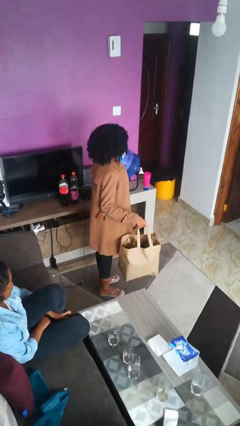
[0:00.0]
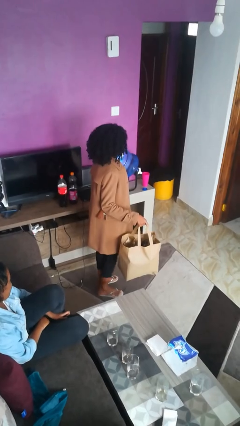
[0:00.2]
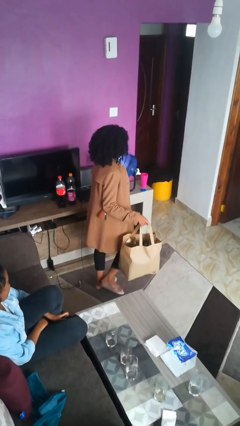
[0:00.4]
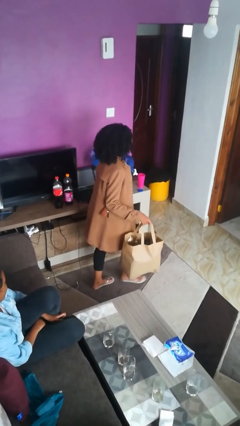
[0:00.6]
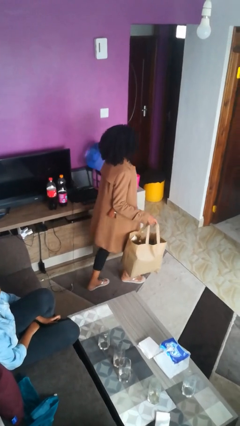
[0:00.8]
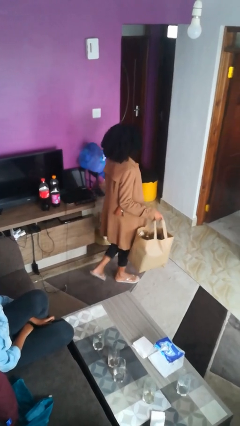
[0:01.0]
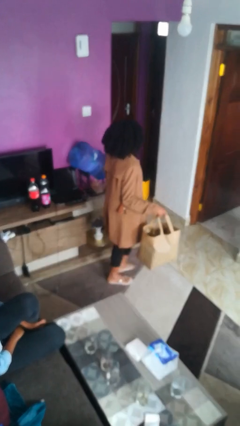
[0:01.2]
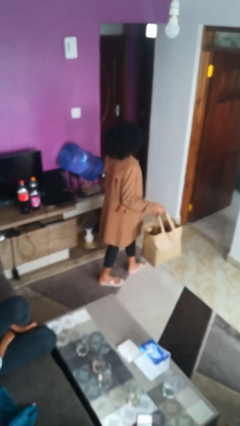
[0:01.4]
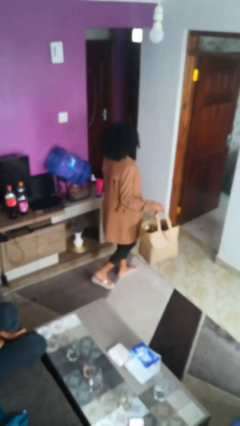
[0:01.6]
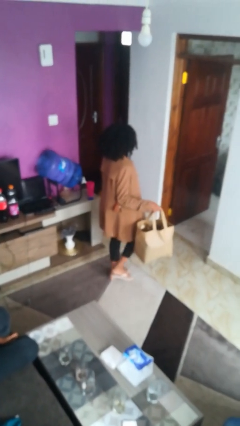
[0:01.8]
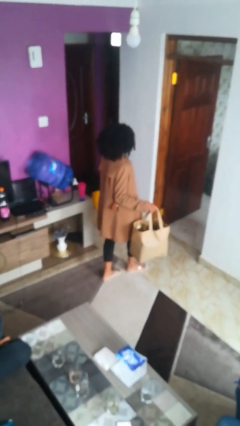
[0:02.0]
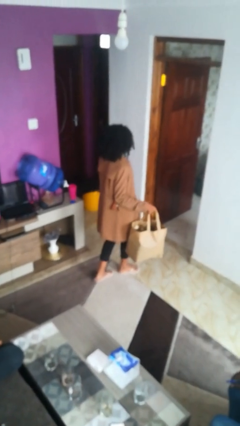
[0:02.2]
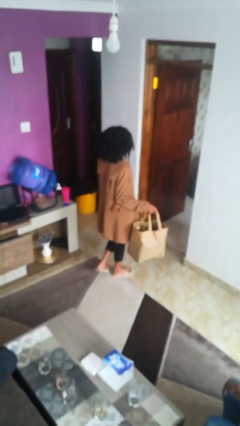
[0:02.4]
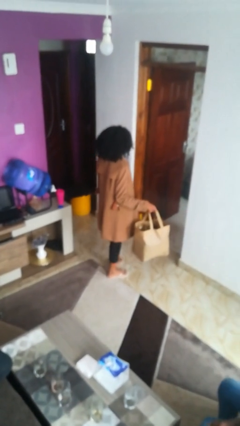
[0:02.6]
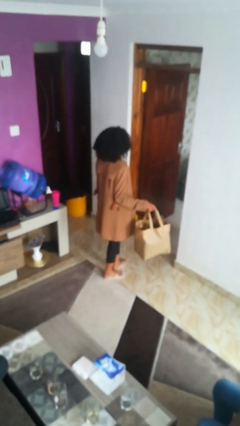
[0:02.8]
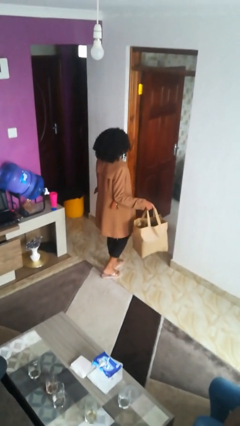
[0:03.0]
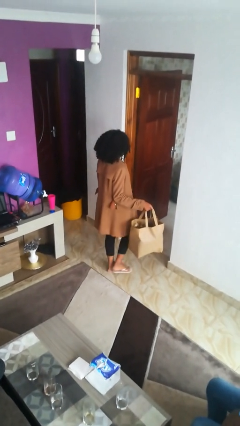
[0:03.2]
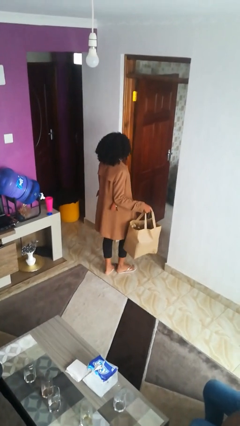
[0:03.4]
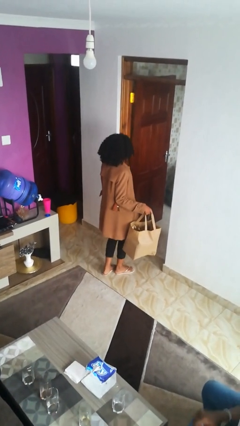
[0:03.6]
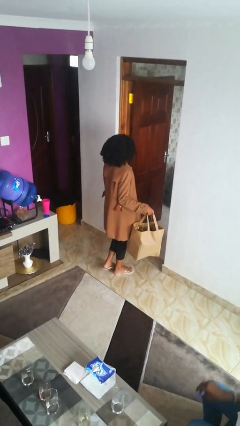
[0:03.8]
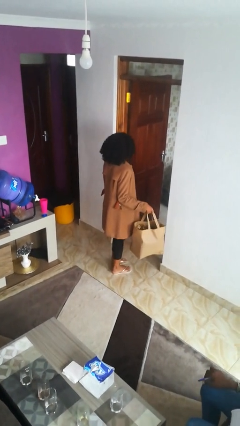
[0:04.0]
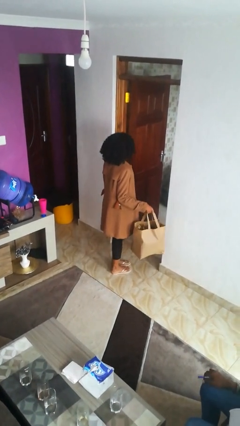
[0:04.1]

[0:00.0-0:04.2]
person carries groceries

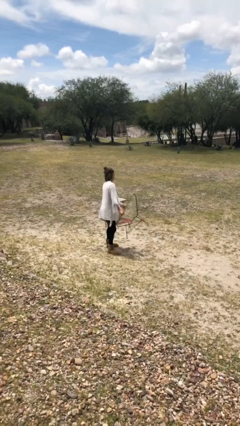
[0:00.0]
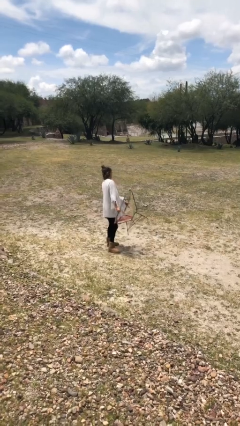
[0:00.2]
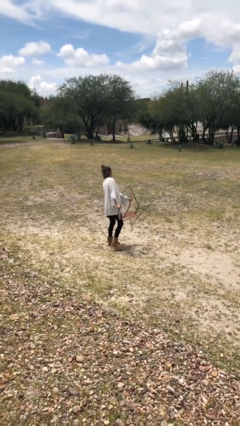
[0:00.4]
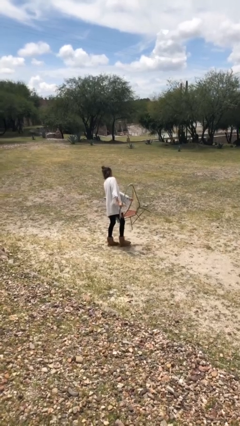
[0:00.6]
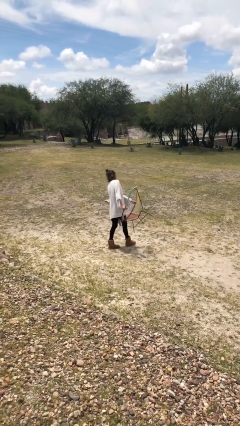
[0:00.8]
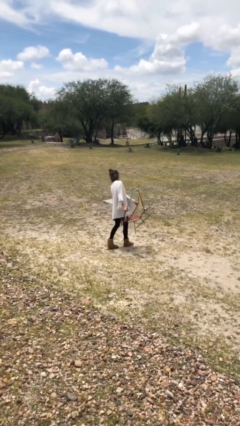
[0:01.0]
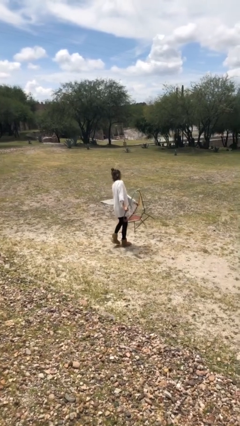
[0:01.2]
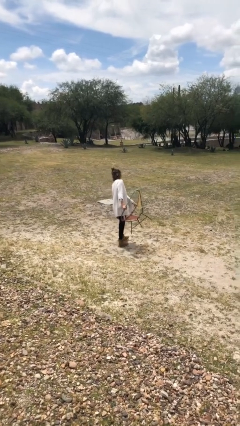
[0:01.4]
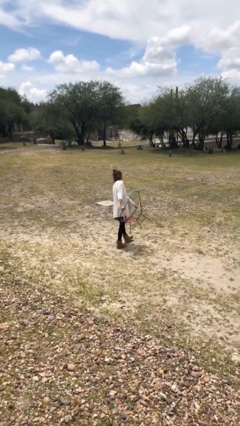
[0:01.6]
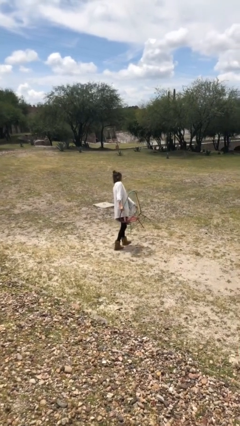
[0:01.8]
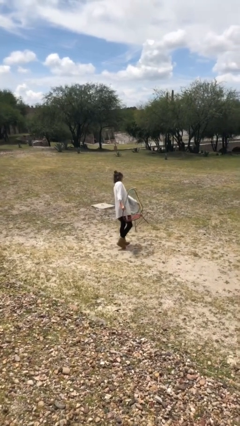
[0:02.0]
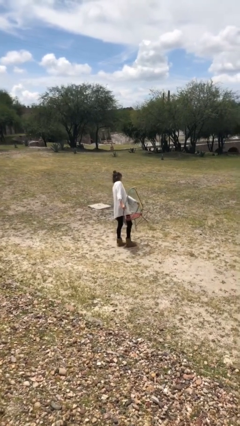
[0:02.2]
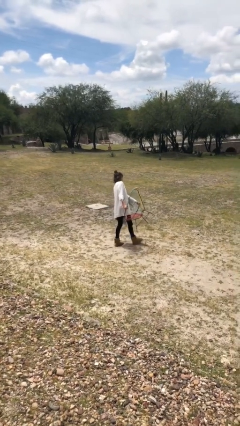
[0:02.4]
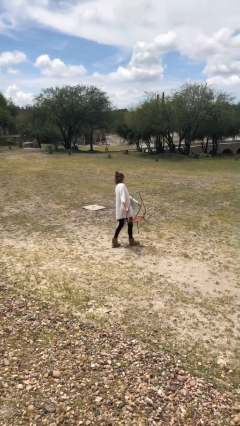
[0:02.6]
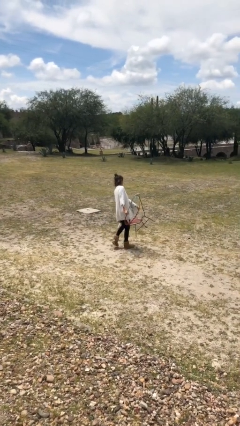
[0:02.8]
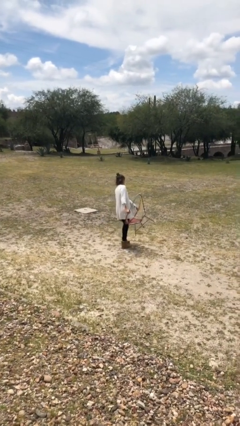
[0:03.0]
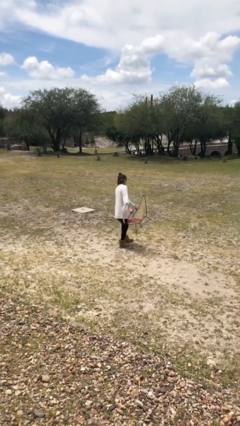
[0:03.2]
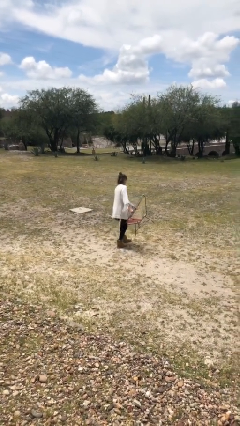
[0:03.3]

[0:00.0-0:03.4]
person carries heavy object

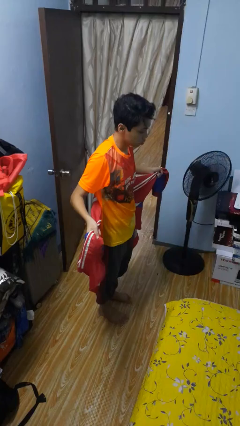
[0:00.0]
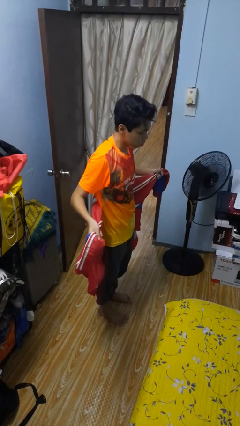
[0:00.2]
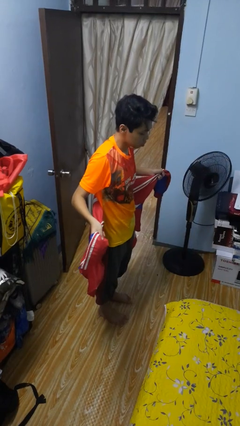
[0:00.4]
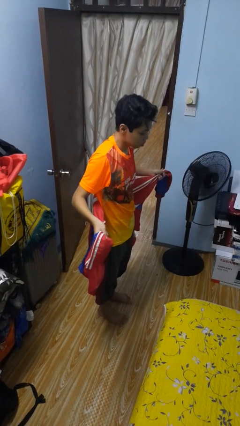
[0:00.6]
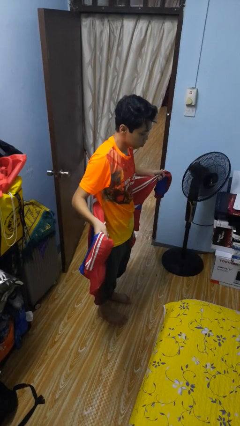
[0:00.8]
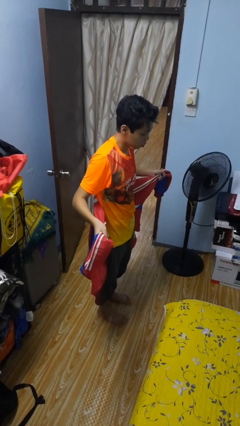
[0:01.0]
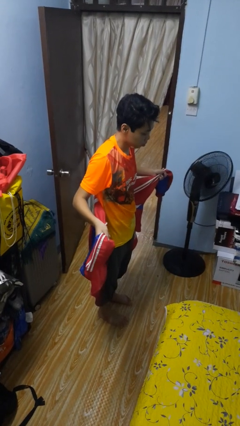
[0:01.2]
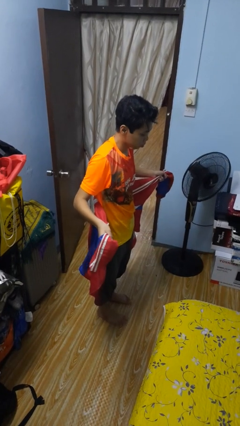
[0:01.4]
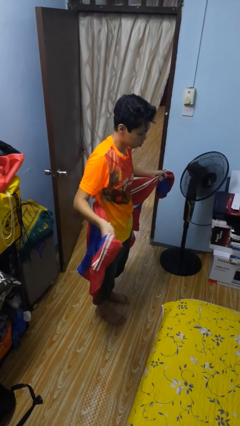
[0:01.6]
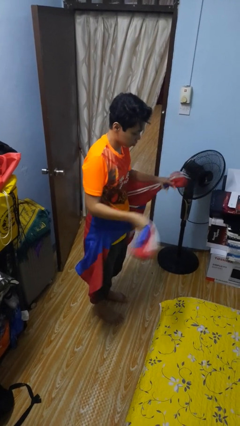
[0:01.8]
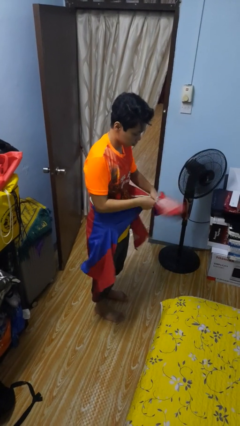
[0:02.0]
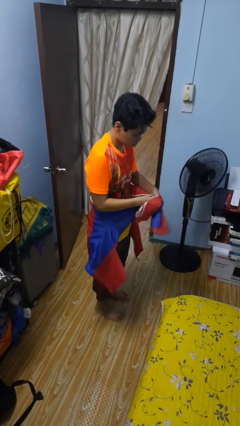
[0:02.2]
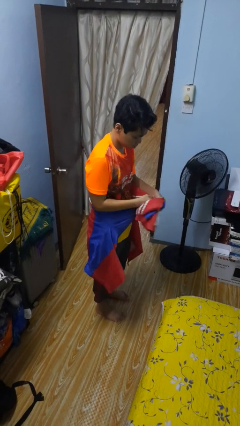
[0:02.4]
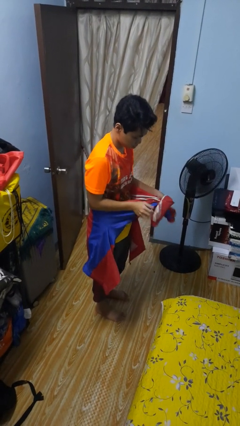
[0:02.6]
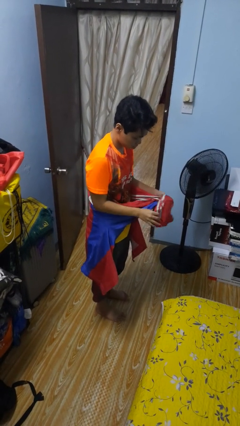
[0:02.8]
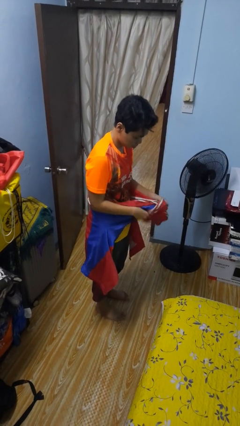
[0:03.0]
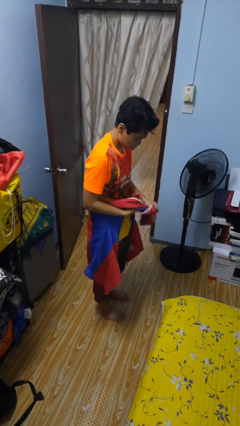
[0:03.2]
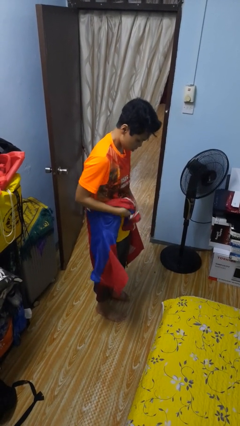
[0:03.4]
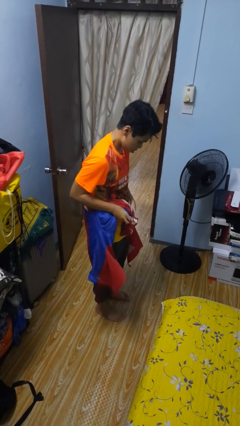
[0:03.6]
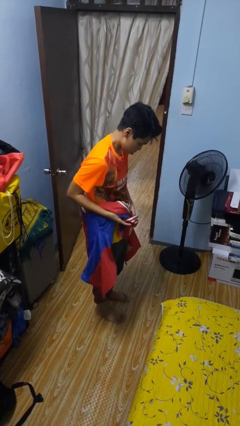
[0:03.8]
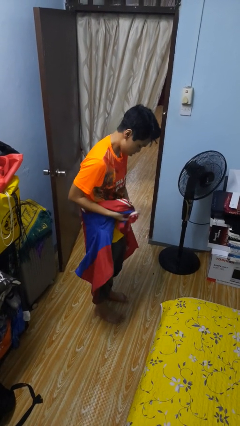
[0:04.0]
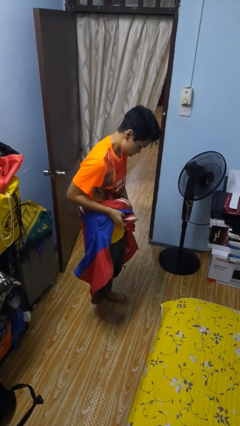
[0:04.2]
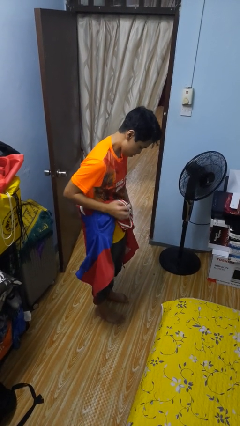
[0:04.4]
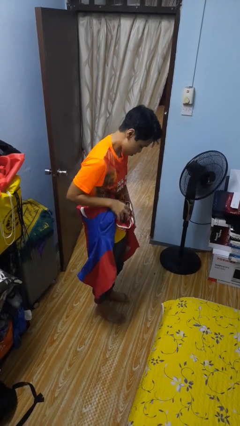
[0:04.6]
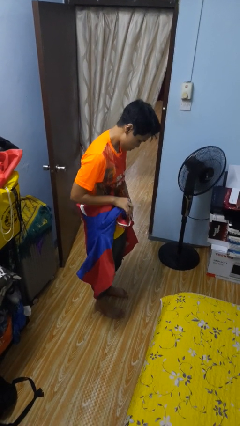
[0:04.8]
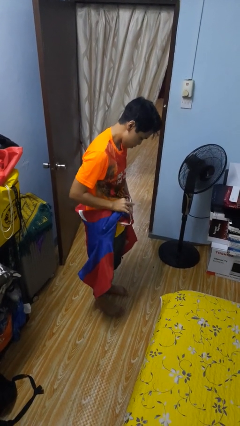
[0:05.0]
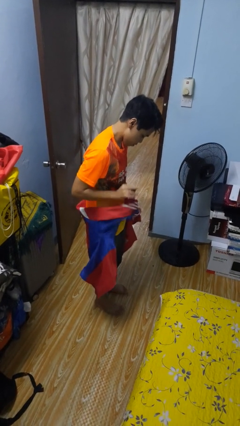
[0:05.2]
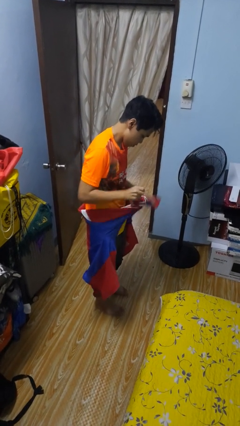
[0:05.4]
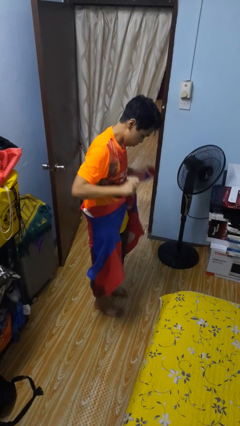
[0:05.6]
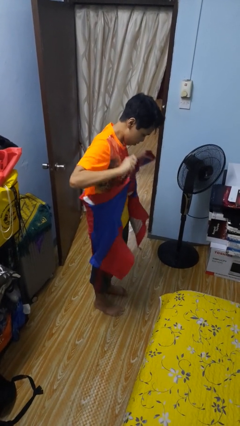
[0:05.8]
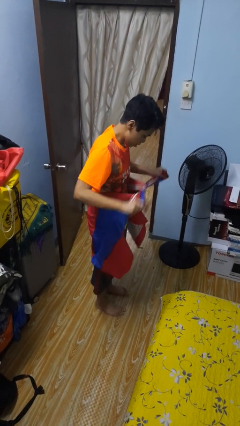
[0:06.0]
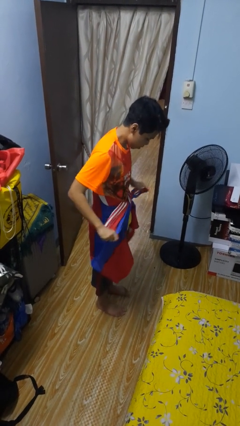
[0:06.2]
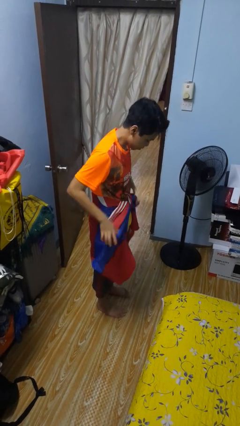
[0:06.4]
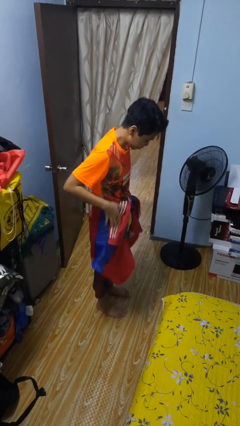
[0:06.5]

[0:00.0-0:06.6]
person ties jacket around waist

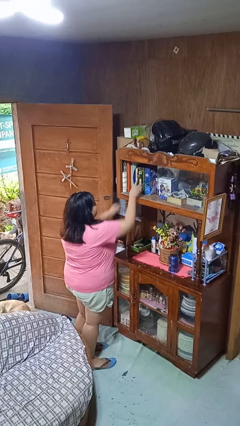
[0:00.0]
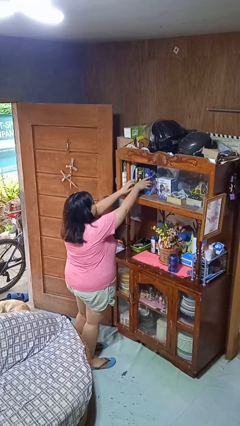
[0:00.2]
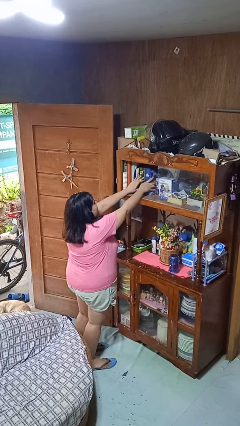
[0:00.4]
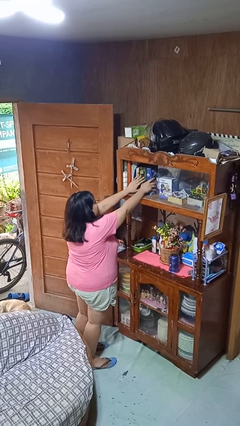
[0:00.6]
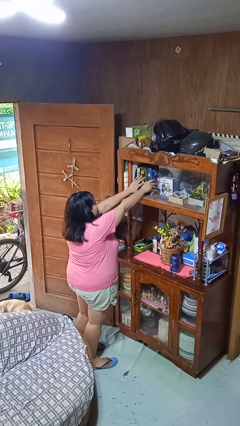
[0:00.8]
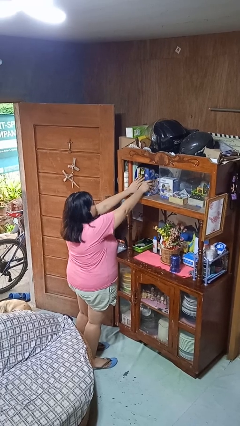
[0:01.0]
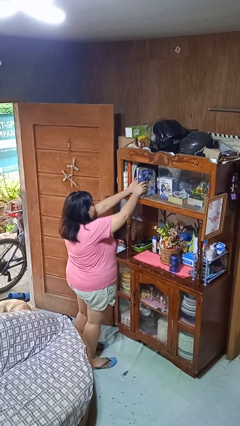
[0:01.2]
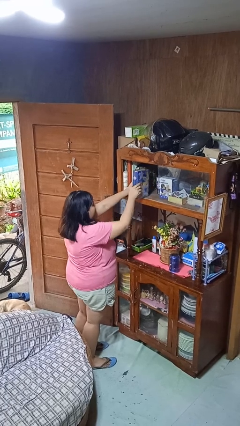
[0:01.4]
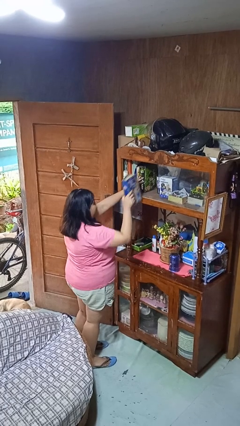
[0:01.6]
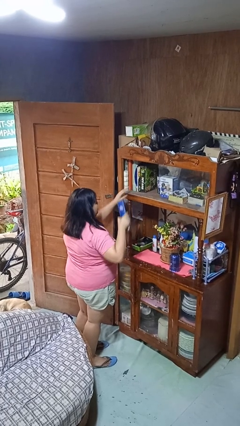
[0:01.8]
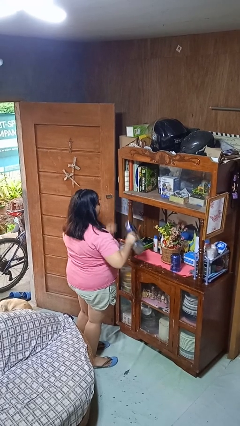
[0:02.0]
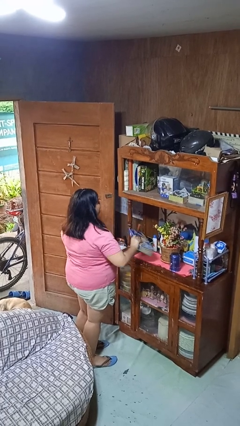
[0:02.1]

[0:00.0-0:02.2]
person picks up object from shelf

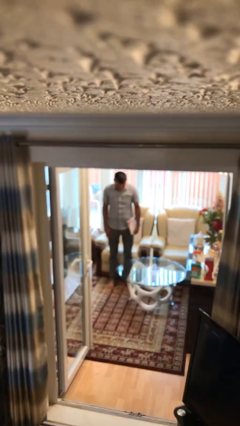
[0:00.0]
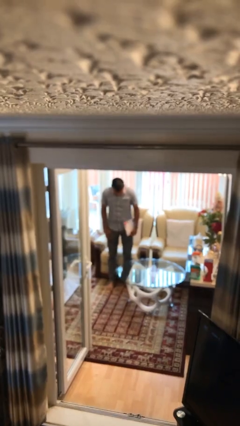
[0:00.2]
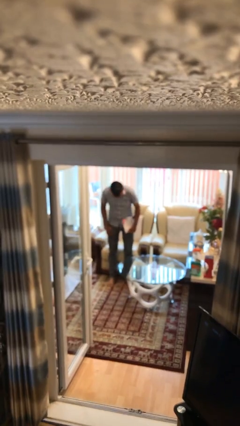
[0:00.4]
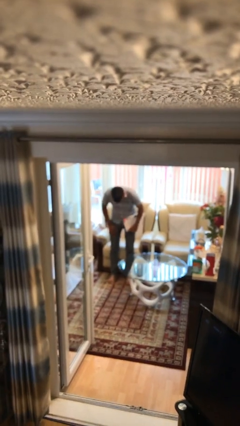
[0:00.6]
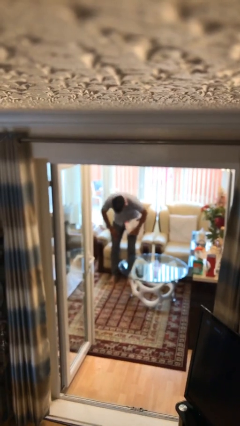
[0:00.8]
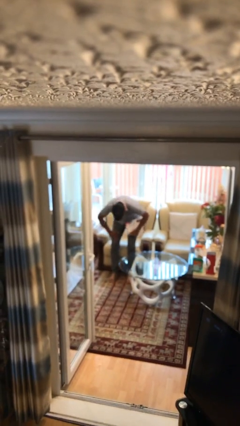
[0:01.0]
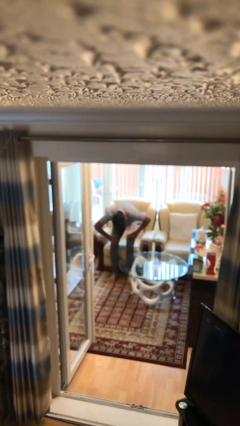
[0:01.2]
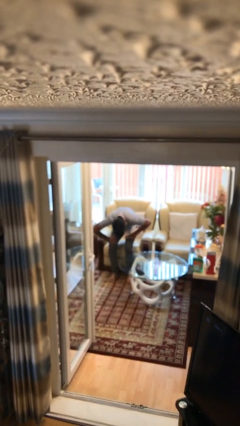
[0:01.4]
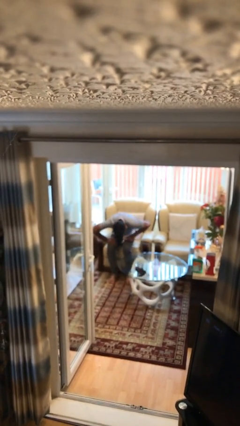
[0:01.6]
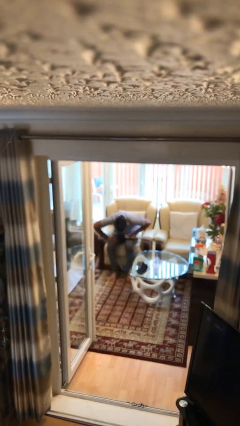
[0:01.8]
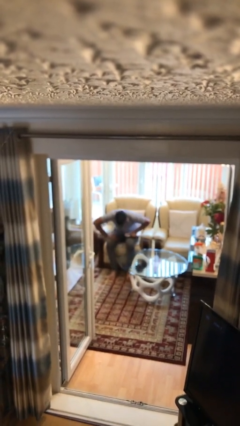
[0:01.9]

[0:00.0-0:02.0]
person sits down
